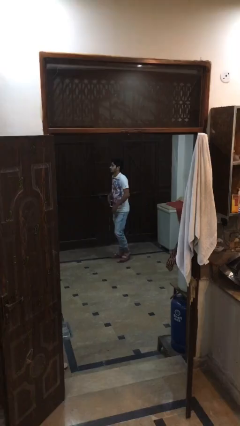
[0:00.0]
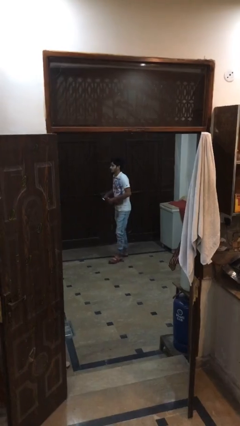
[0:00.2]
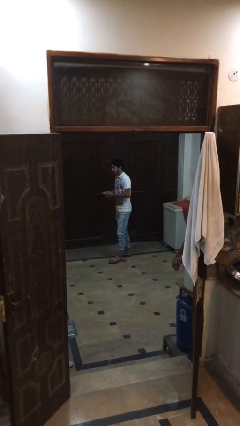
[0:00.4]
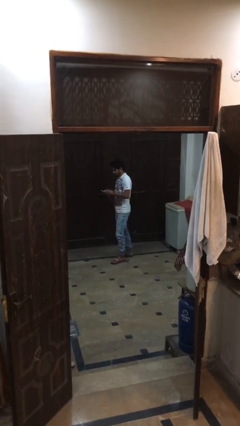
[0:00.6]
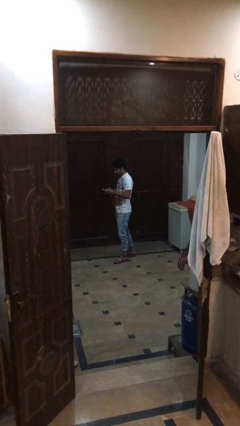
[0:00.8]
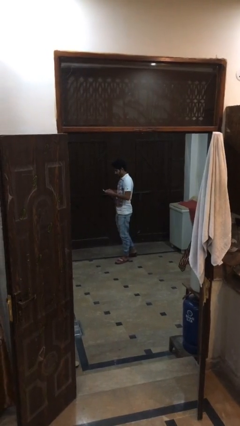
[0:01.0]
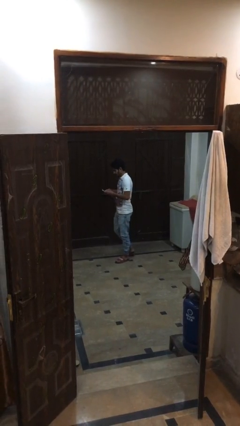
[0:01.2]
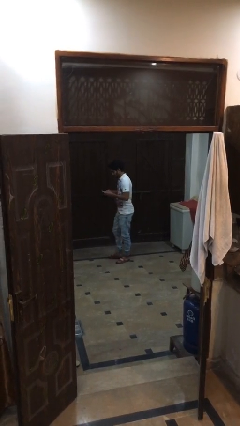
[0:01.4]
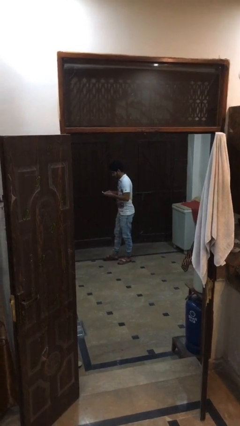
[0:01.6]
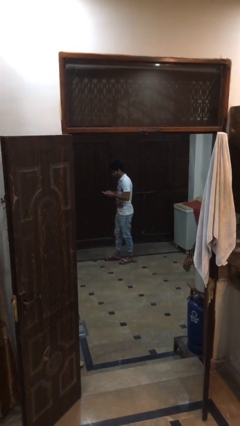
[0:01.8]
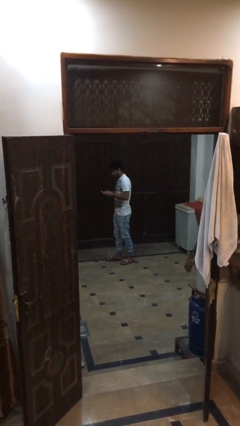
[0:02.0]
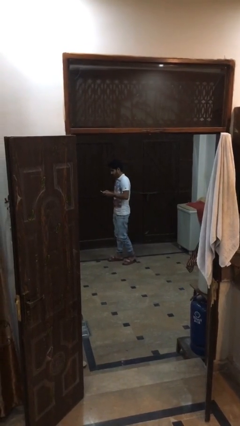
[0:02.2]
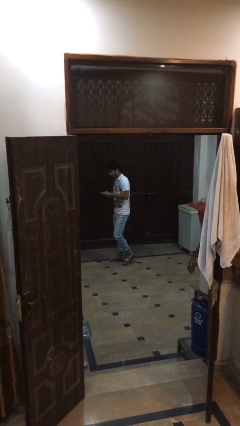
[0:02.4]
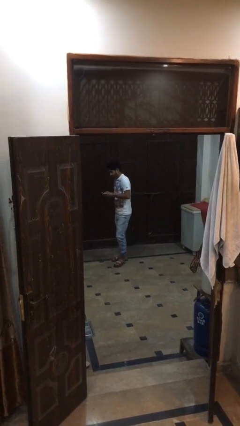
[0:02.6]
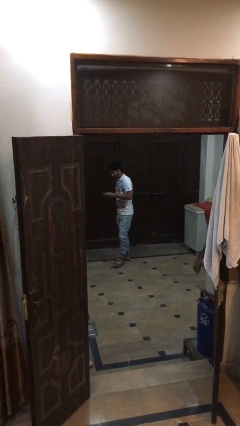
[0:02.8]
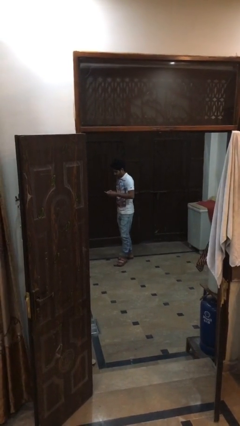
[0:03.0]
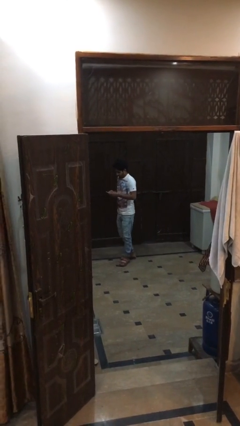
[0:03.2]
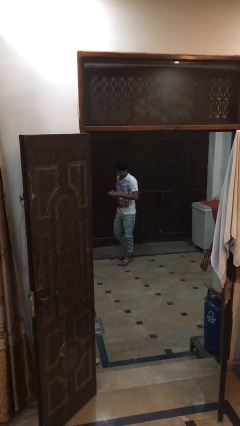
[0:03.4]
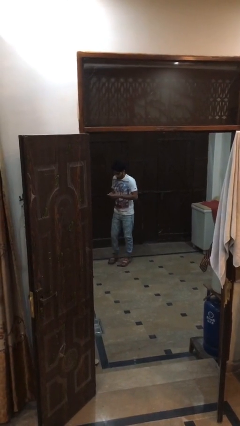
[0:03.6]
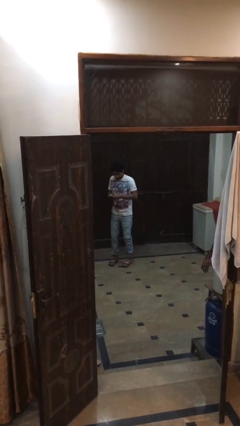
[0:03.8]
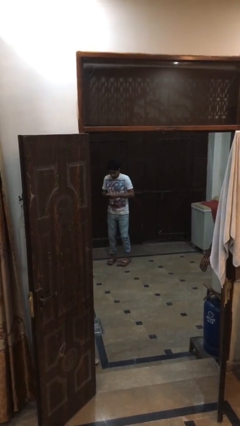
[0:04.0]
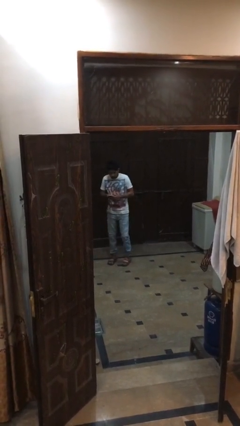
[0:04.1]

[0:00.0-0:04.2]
person texts on phone

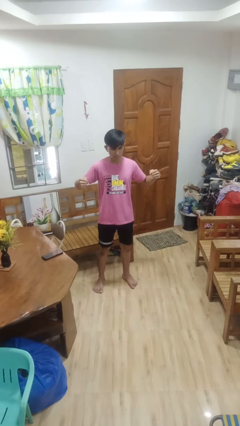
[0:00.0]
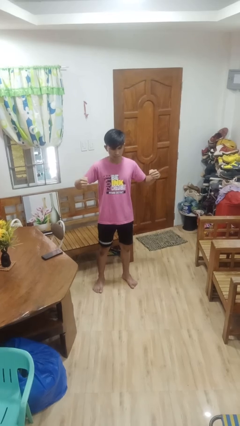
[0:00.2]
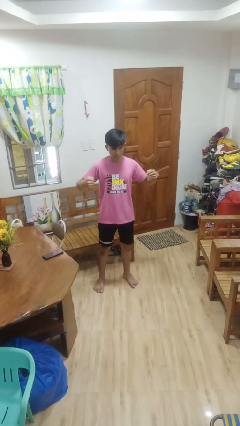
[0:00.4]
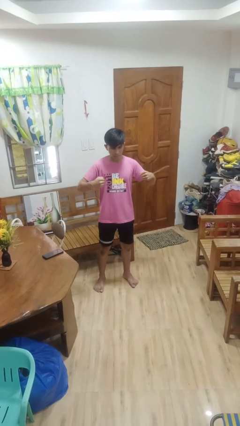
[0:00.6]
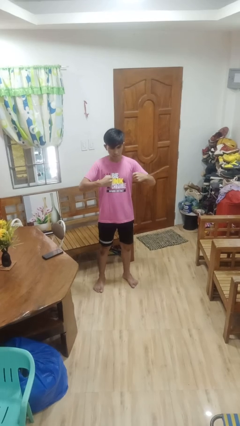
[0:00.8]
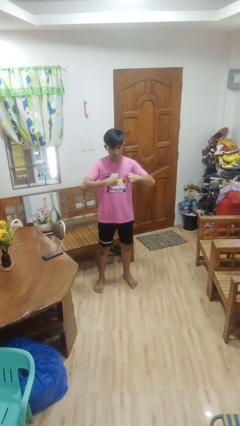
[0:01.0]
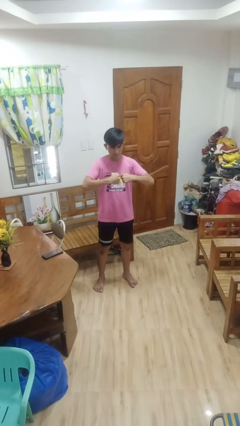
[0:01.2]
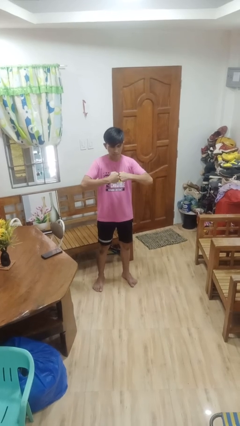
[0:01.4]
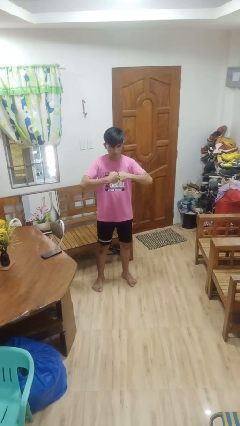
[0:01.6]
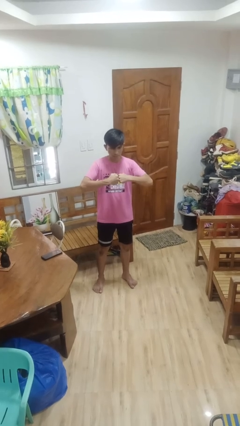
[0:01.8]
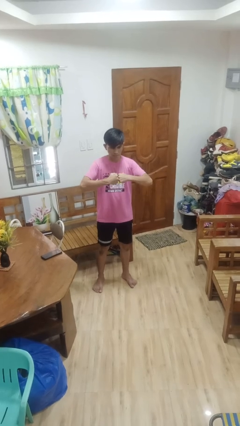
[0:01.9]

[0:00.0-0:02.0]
person gestures zoom out

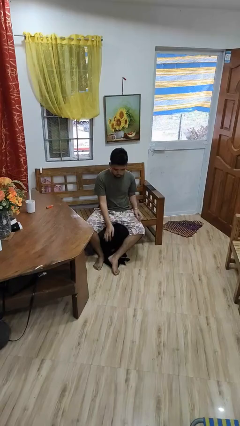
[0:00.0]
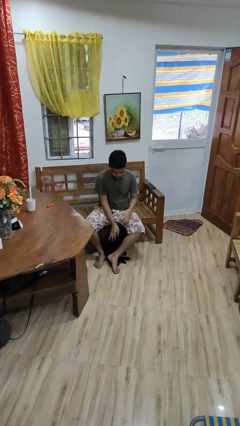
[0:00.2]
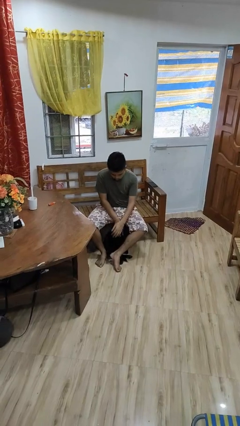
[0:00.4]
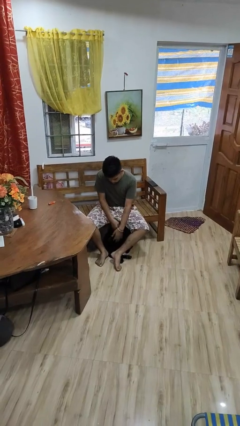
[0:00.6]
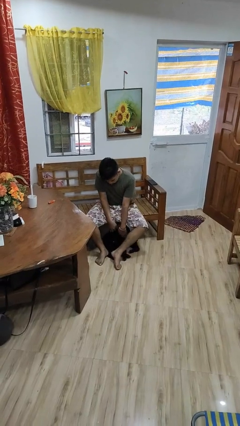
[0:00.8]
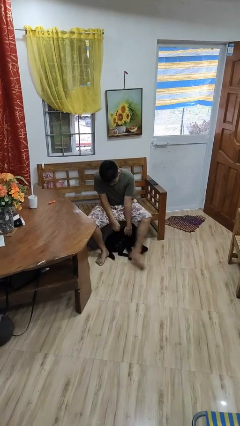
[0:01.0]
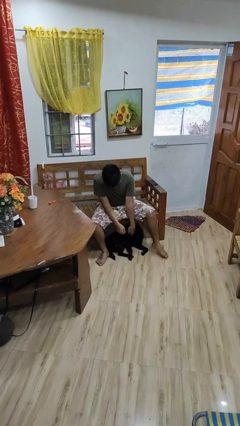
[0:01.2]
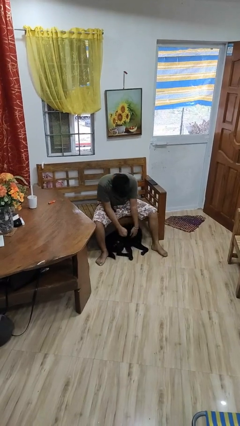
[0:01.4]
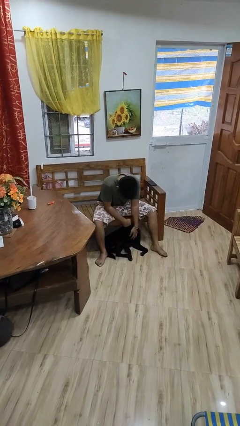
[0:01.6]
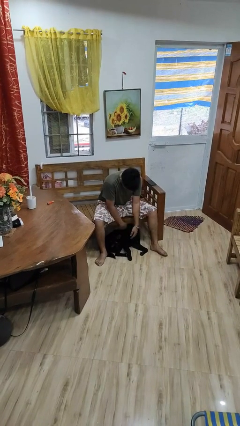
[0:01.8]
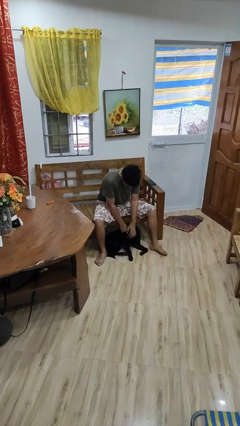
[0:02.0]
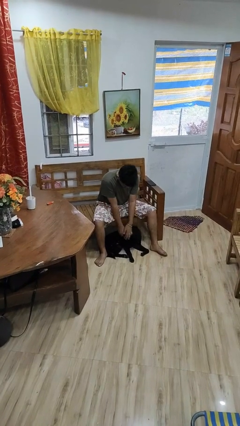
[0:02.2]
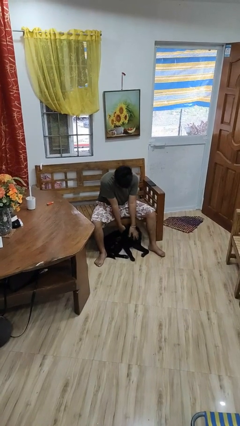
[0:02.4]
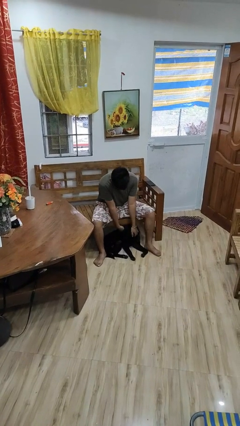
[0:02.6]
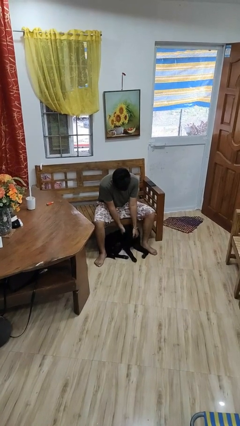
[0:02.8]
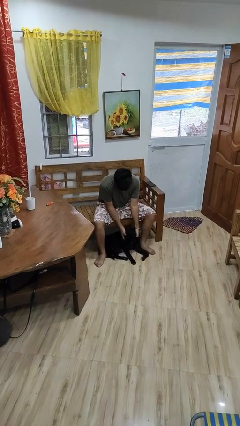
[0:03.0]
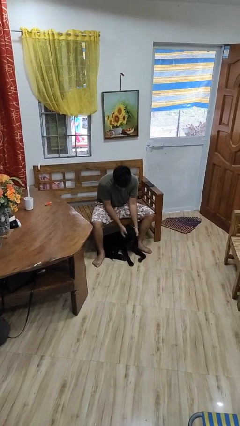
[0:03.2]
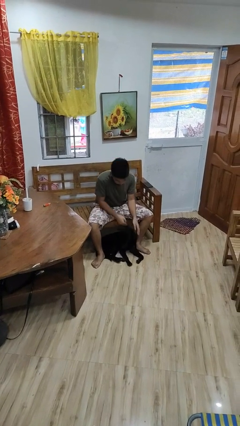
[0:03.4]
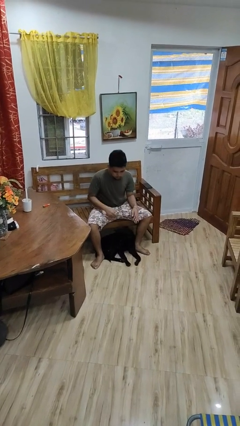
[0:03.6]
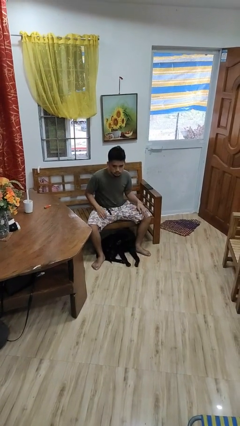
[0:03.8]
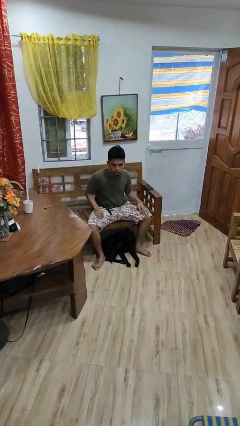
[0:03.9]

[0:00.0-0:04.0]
person pets dog

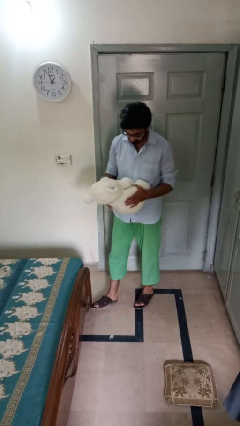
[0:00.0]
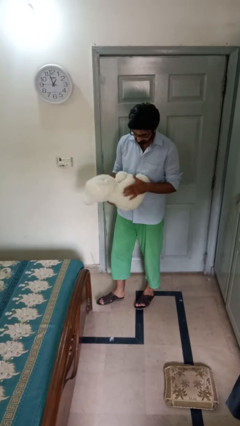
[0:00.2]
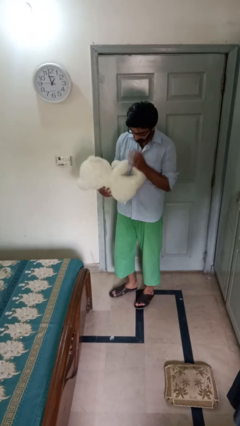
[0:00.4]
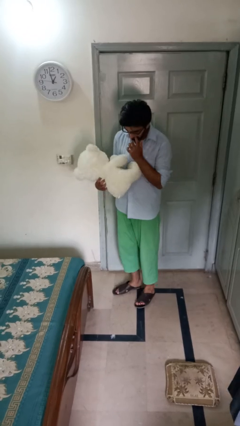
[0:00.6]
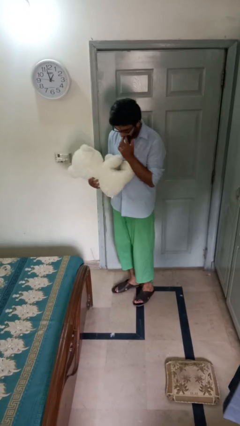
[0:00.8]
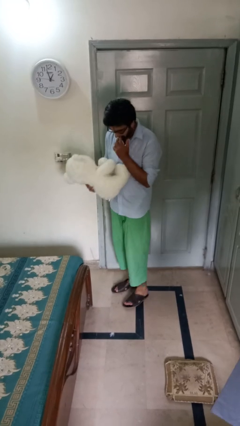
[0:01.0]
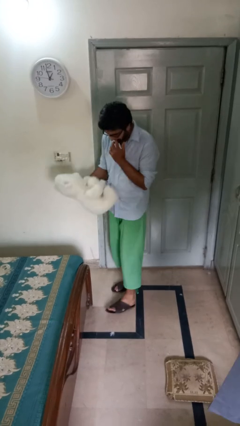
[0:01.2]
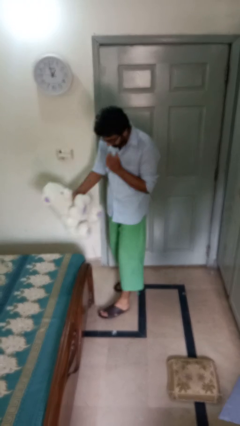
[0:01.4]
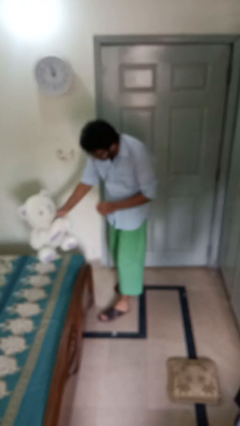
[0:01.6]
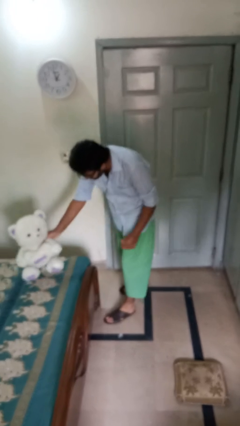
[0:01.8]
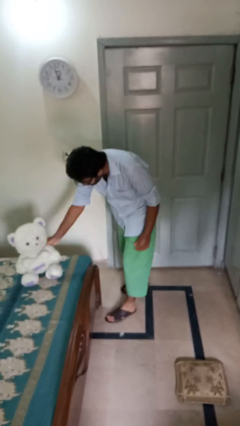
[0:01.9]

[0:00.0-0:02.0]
person puts down object on bed

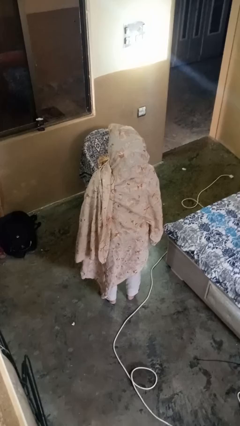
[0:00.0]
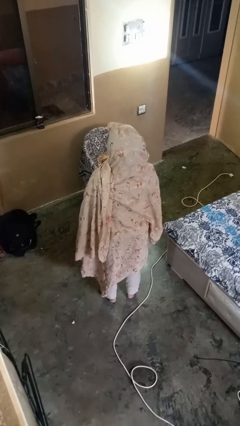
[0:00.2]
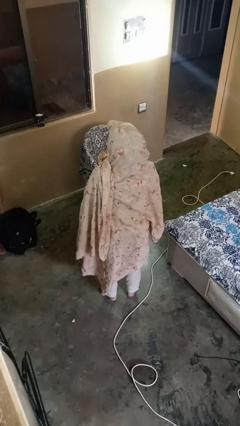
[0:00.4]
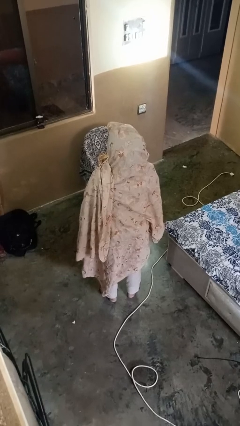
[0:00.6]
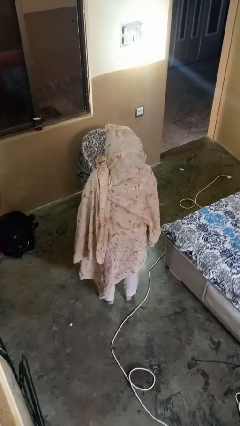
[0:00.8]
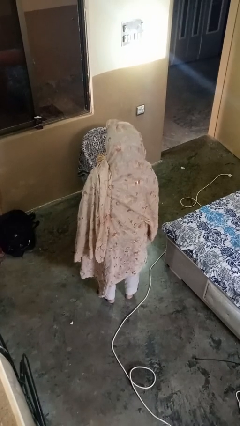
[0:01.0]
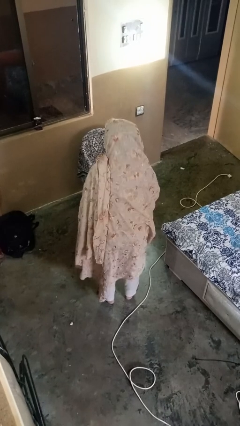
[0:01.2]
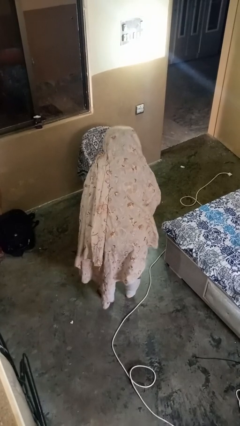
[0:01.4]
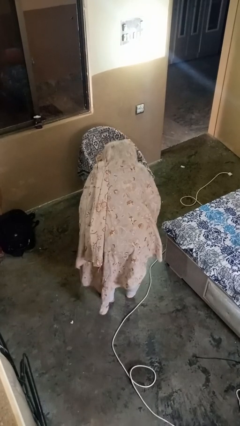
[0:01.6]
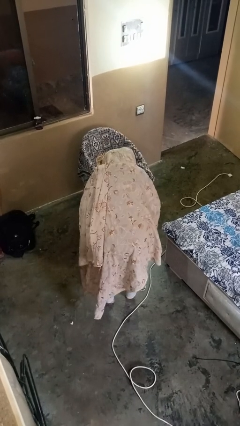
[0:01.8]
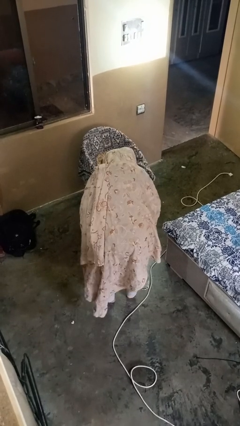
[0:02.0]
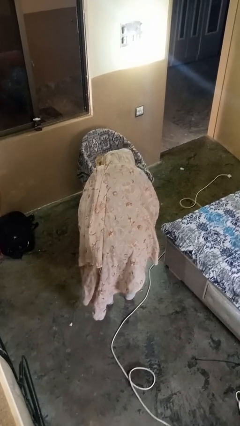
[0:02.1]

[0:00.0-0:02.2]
person bows

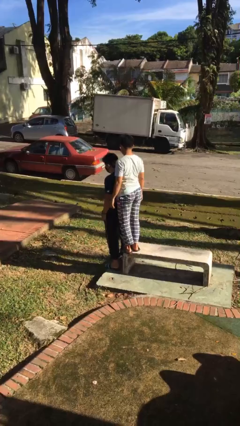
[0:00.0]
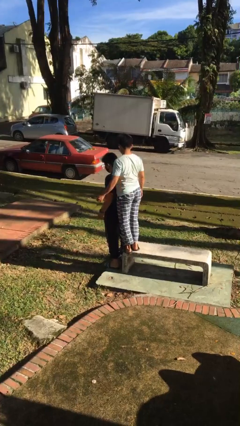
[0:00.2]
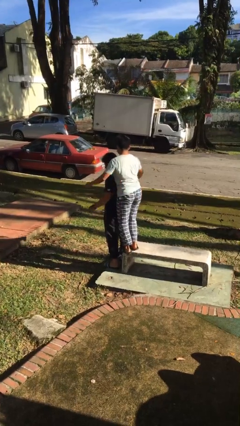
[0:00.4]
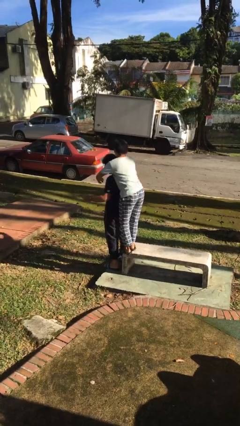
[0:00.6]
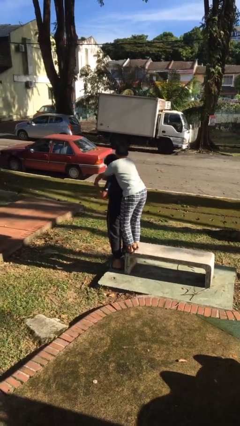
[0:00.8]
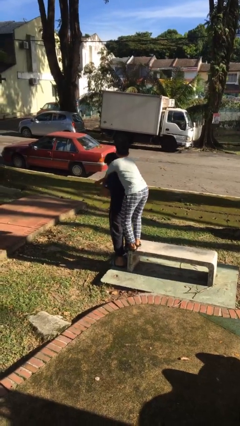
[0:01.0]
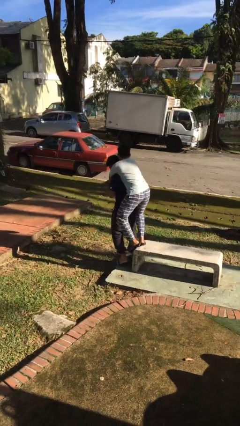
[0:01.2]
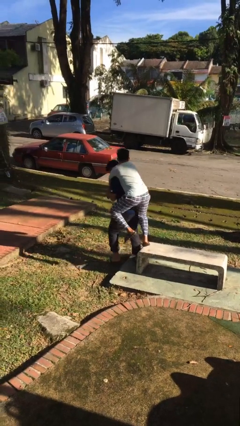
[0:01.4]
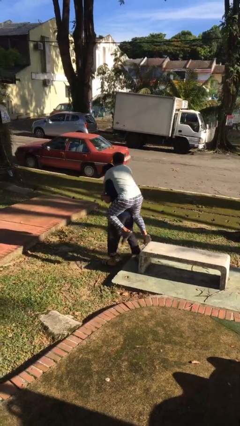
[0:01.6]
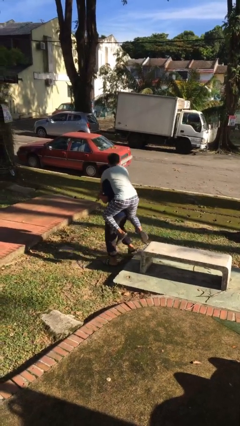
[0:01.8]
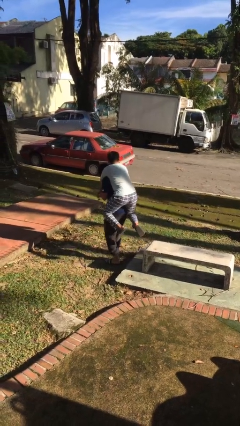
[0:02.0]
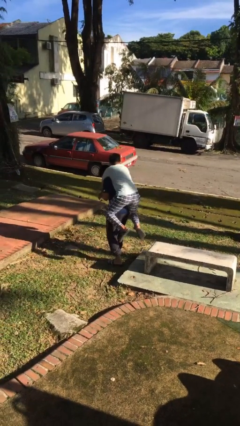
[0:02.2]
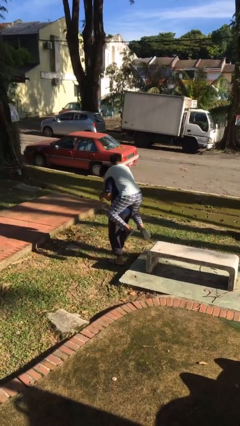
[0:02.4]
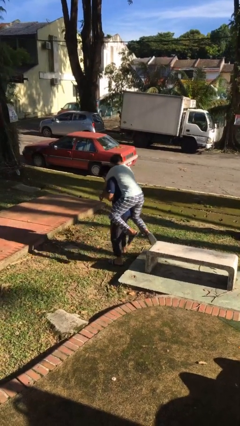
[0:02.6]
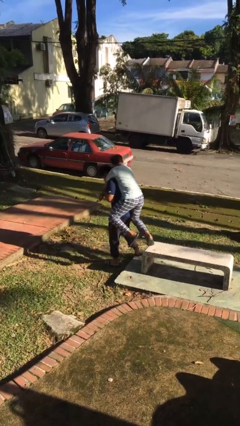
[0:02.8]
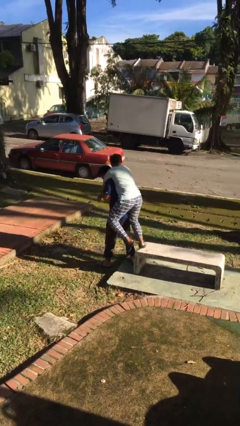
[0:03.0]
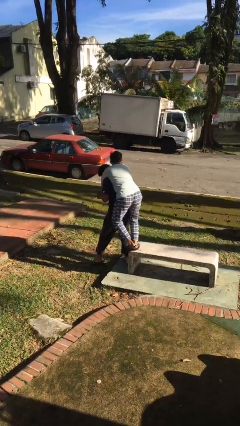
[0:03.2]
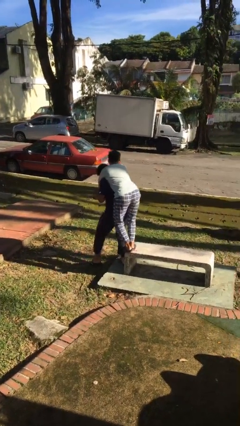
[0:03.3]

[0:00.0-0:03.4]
person carries person on back
